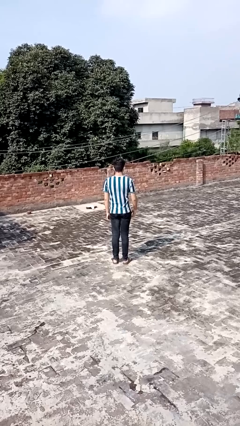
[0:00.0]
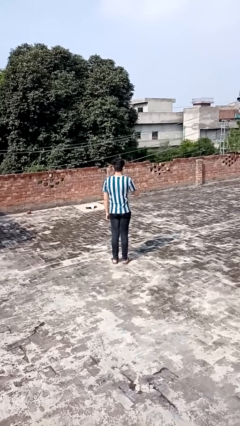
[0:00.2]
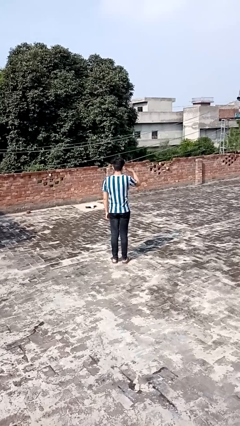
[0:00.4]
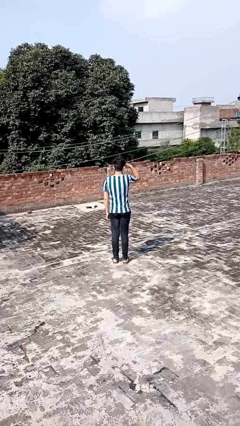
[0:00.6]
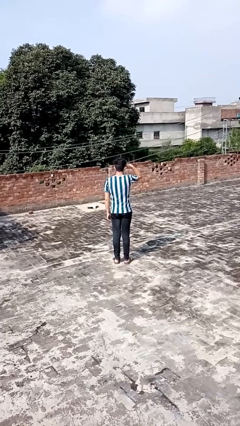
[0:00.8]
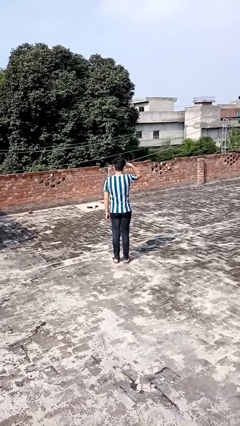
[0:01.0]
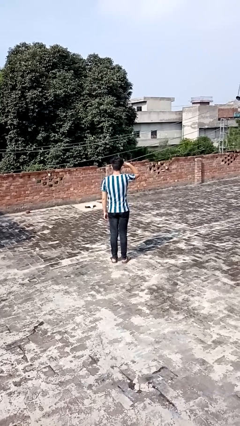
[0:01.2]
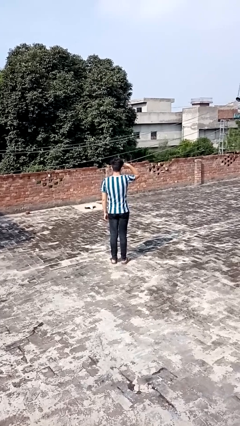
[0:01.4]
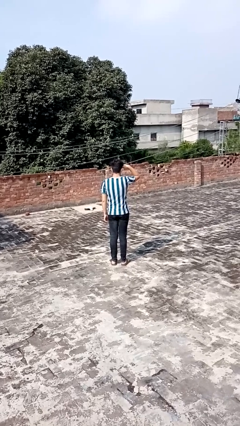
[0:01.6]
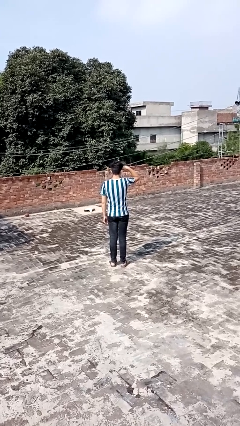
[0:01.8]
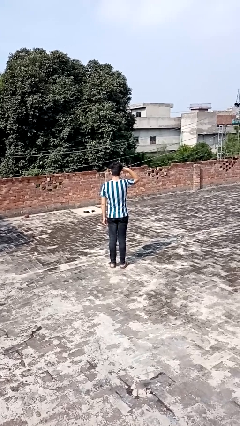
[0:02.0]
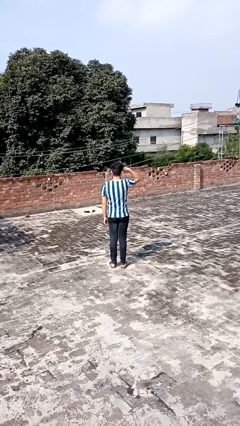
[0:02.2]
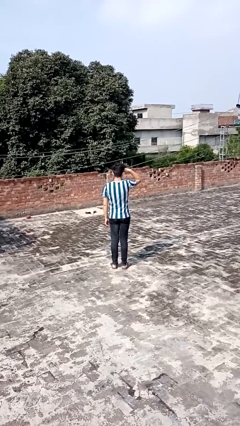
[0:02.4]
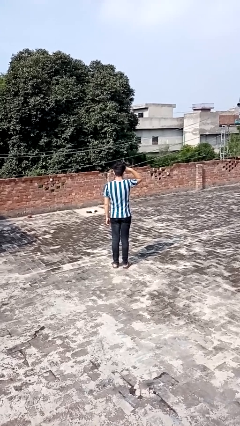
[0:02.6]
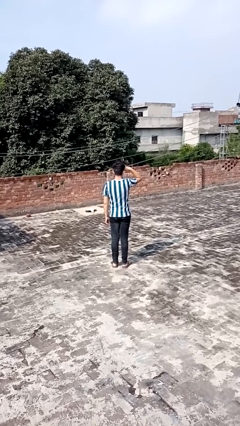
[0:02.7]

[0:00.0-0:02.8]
person salutes

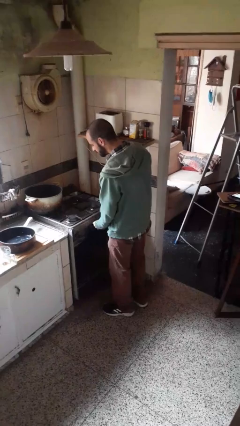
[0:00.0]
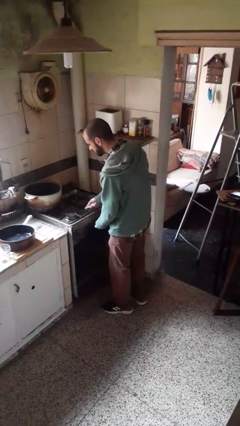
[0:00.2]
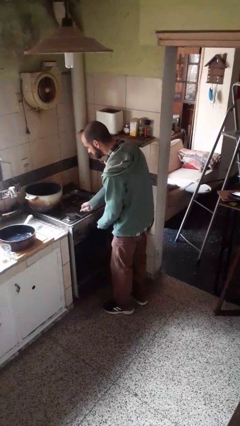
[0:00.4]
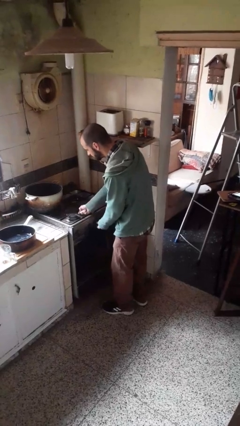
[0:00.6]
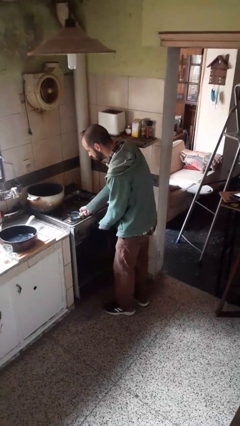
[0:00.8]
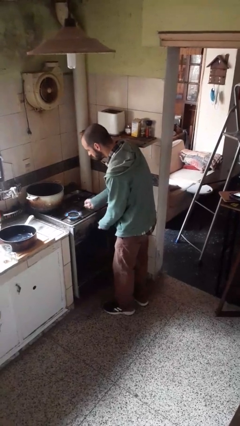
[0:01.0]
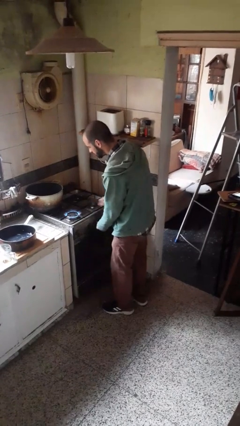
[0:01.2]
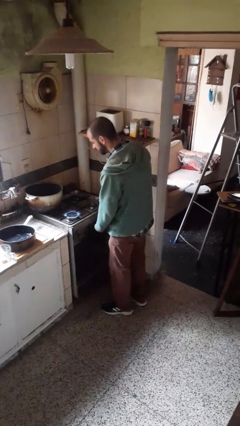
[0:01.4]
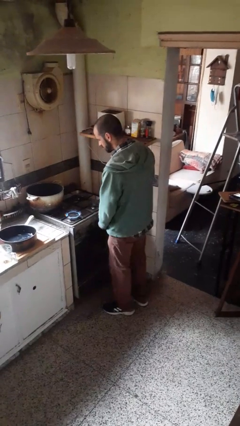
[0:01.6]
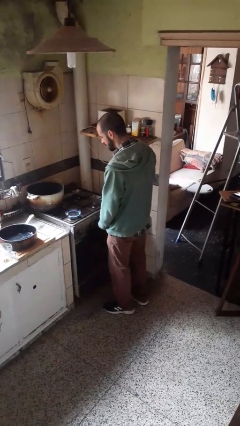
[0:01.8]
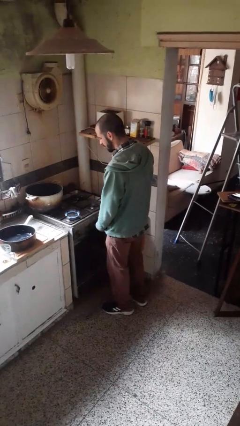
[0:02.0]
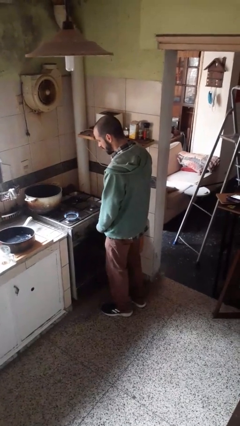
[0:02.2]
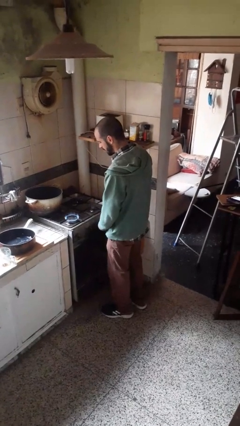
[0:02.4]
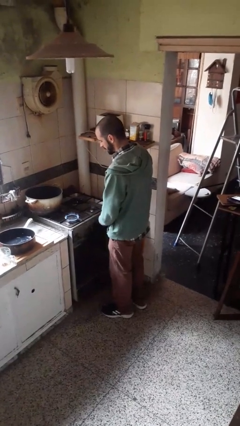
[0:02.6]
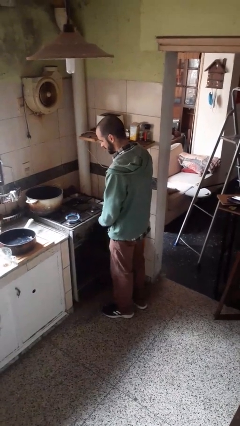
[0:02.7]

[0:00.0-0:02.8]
person turns on stovetop

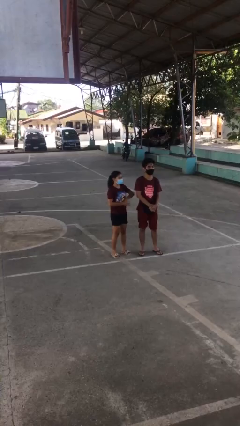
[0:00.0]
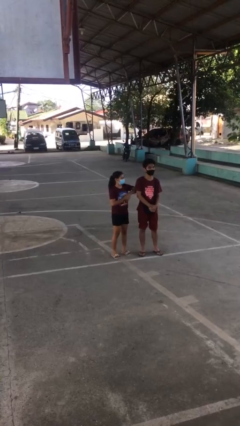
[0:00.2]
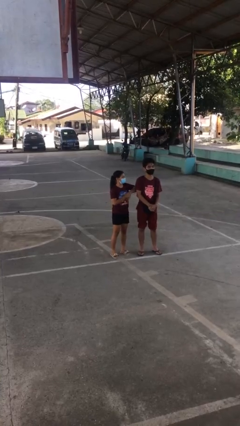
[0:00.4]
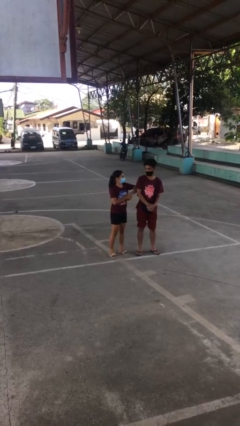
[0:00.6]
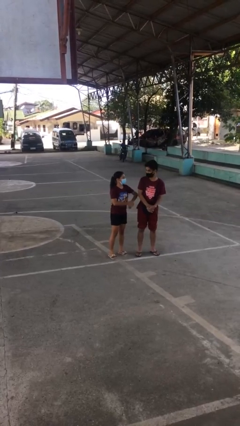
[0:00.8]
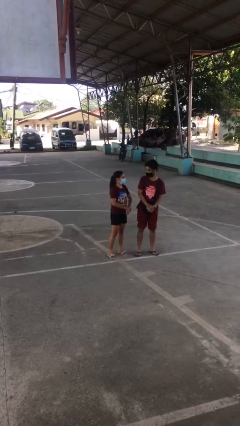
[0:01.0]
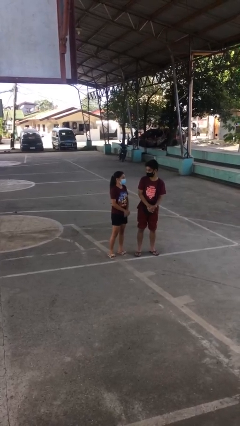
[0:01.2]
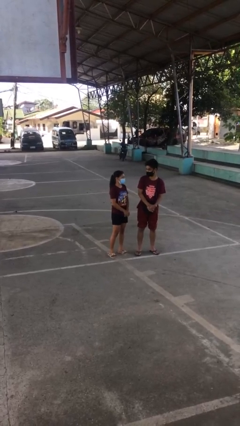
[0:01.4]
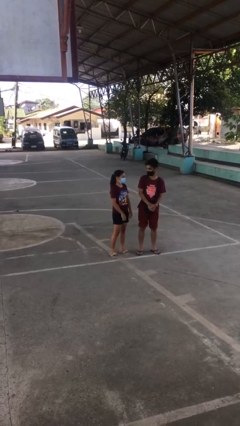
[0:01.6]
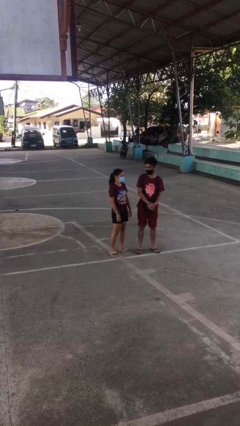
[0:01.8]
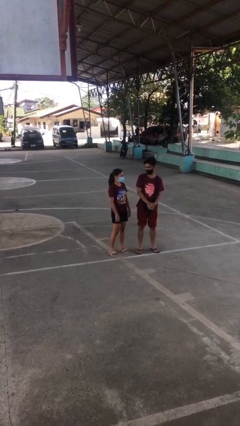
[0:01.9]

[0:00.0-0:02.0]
person nudges person with elbow

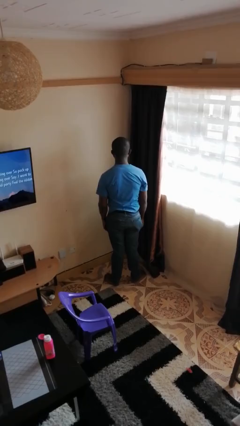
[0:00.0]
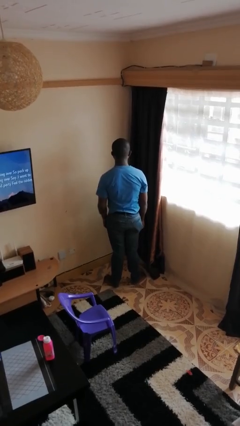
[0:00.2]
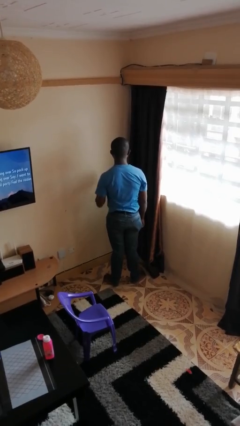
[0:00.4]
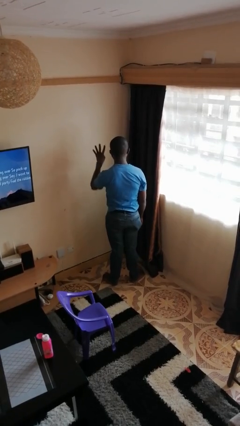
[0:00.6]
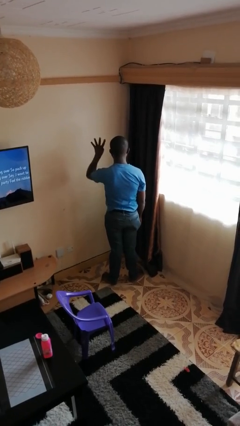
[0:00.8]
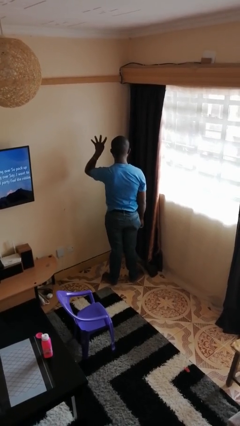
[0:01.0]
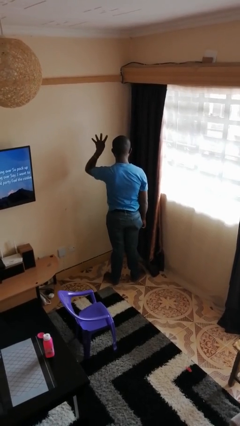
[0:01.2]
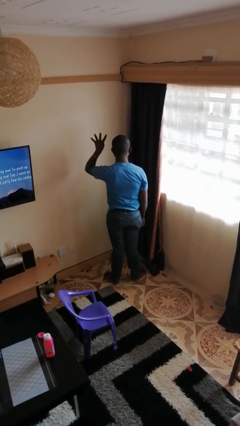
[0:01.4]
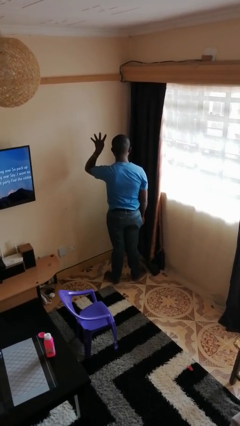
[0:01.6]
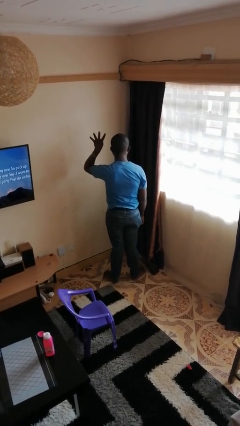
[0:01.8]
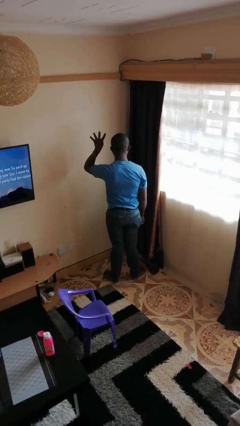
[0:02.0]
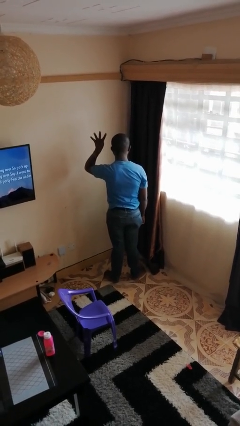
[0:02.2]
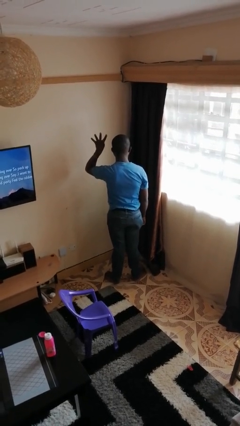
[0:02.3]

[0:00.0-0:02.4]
person gestures number four

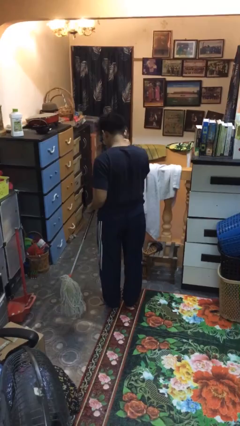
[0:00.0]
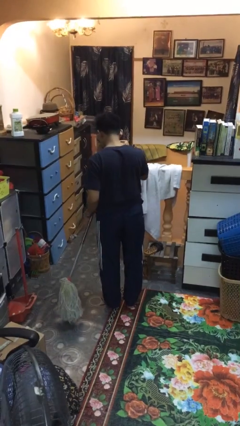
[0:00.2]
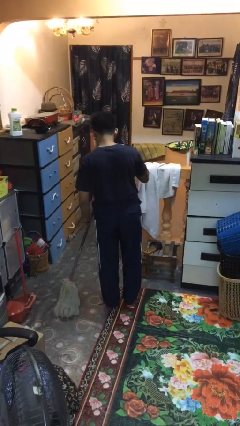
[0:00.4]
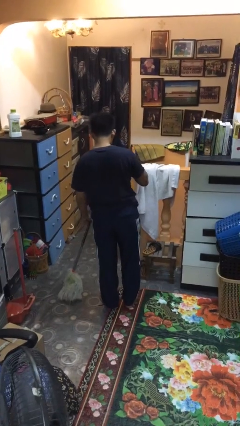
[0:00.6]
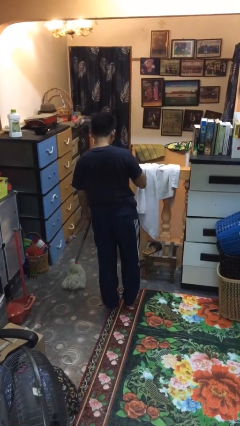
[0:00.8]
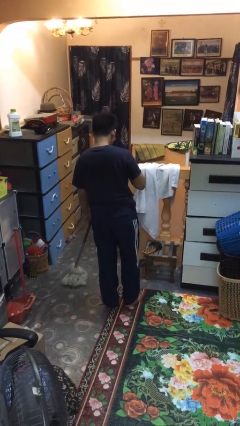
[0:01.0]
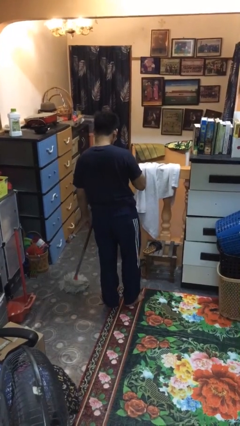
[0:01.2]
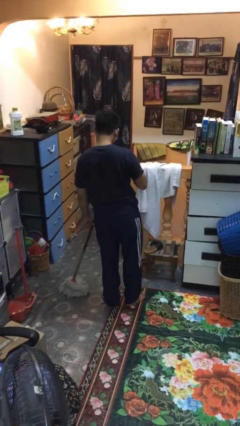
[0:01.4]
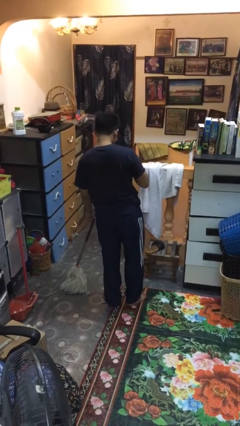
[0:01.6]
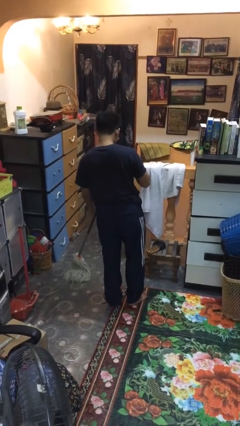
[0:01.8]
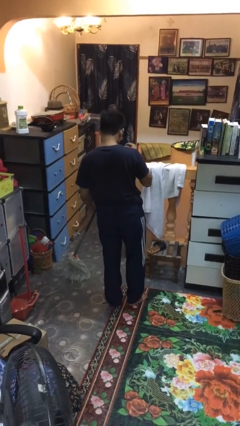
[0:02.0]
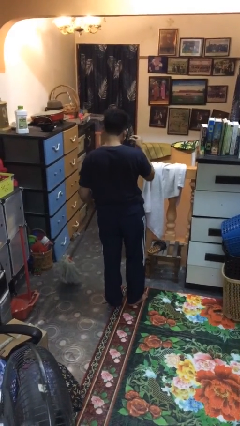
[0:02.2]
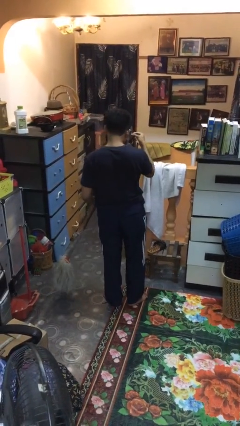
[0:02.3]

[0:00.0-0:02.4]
person mops

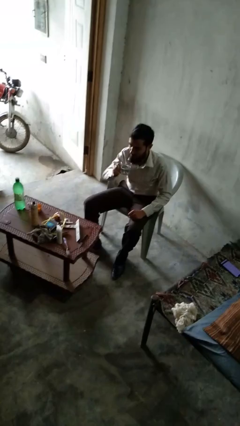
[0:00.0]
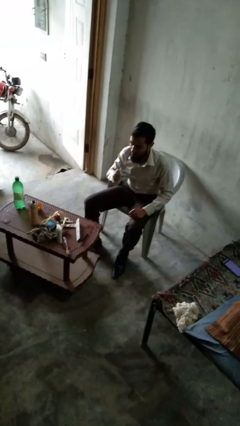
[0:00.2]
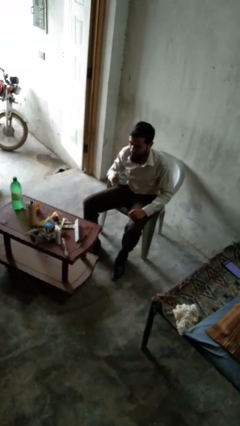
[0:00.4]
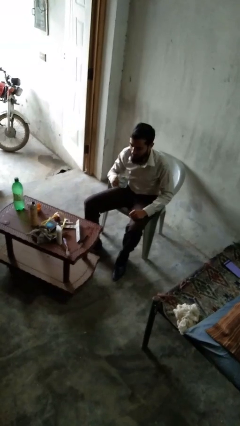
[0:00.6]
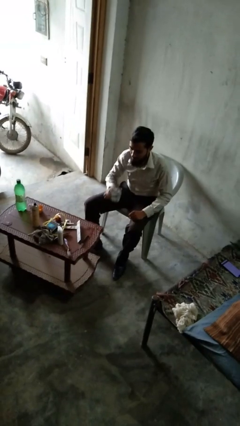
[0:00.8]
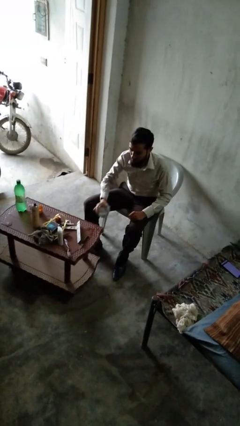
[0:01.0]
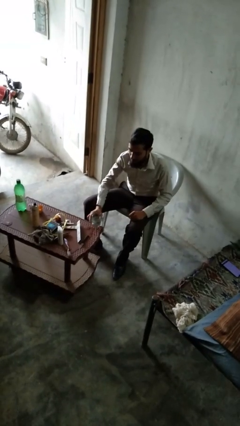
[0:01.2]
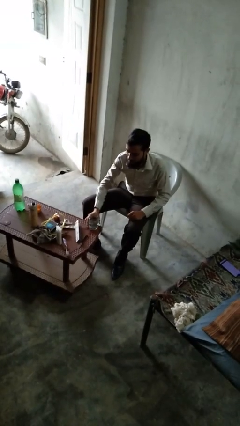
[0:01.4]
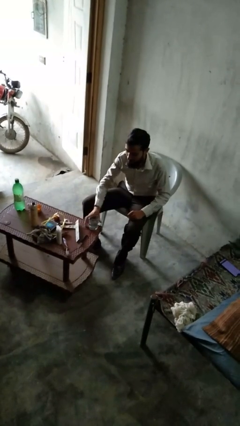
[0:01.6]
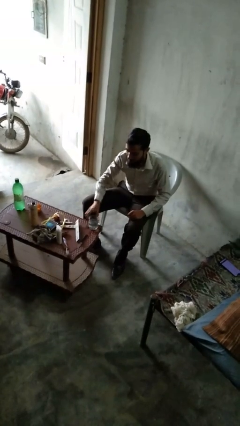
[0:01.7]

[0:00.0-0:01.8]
person puts down object on table

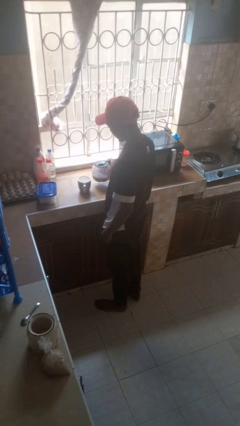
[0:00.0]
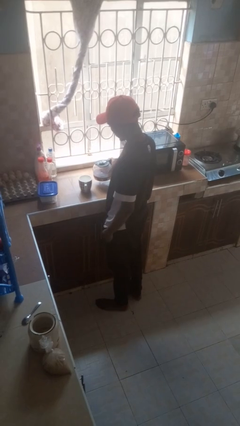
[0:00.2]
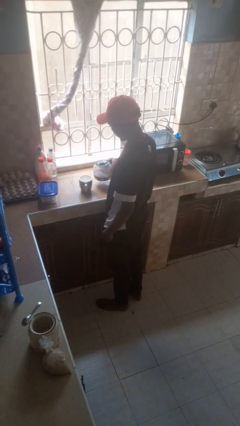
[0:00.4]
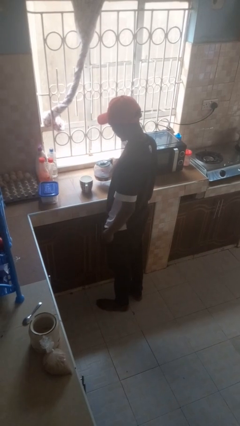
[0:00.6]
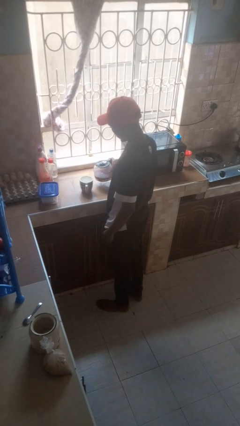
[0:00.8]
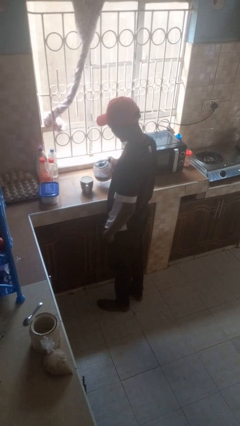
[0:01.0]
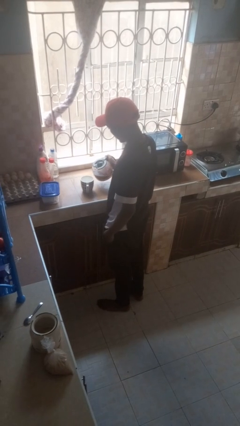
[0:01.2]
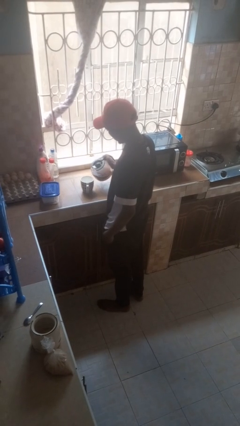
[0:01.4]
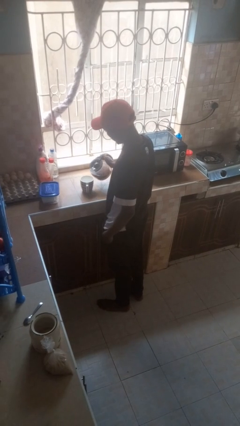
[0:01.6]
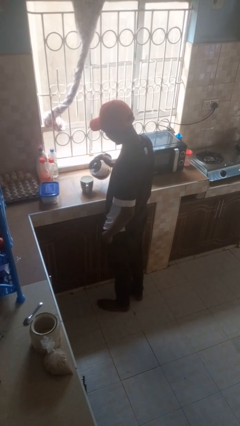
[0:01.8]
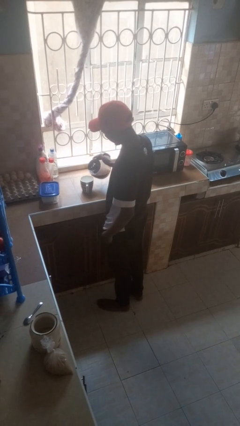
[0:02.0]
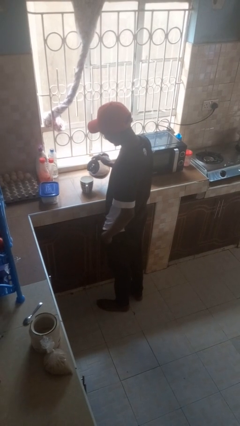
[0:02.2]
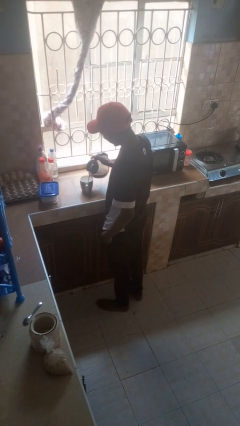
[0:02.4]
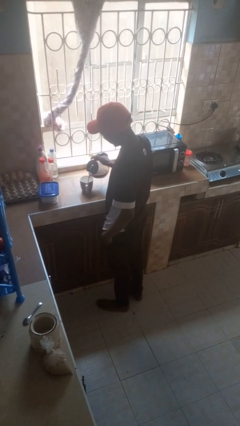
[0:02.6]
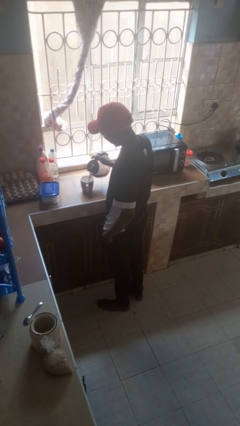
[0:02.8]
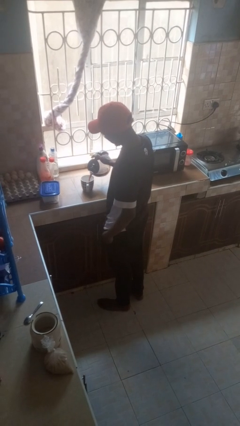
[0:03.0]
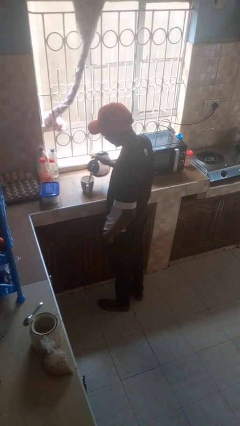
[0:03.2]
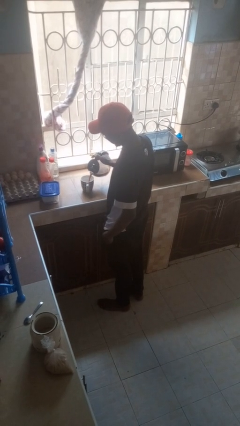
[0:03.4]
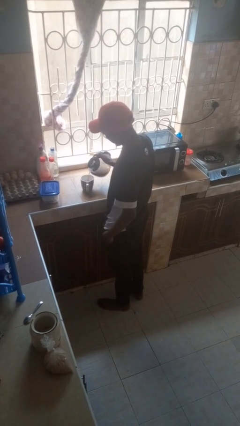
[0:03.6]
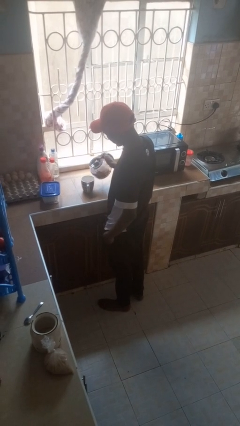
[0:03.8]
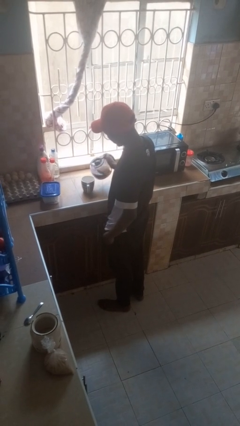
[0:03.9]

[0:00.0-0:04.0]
person pours coffee into mug
